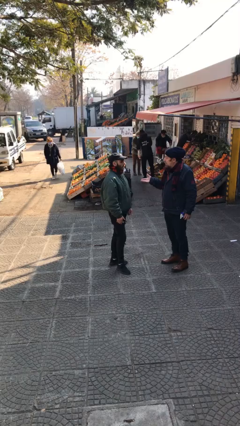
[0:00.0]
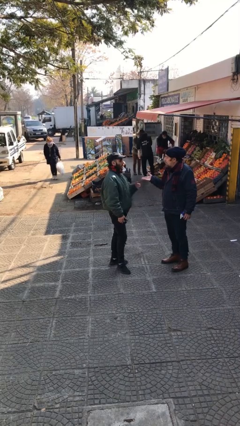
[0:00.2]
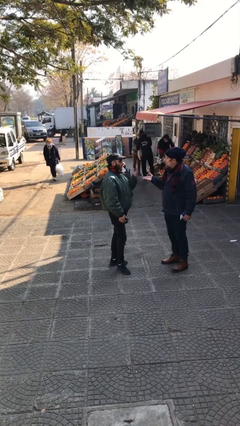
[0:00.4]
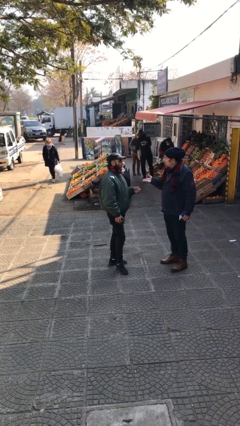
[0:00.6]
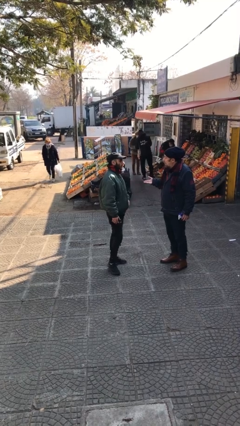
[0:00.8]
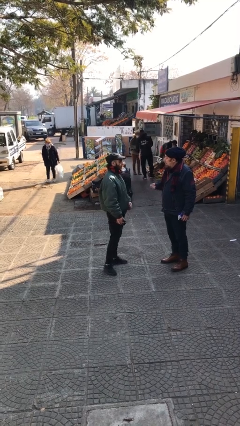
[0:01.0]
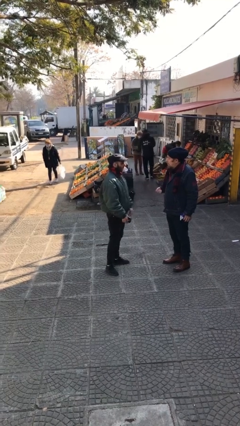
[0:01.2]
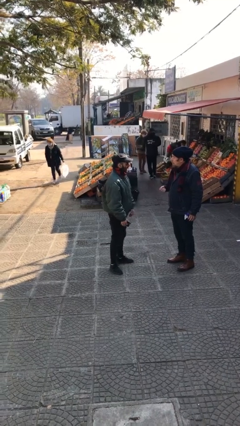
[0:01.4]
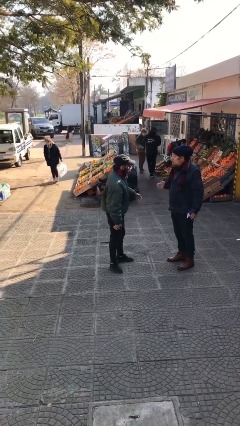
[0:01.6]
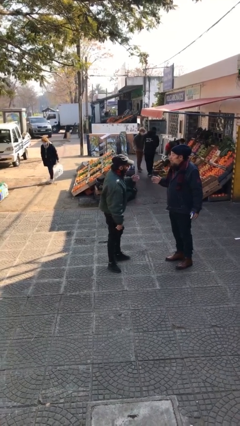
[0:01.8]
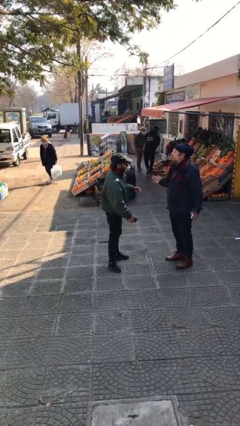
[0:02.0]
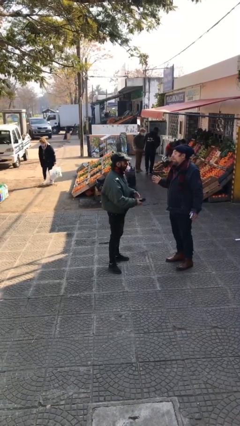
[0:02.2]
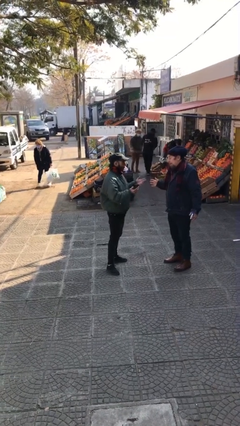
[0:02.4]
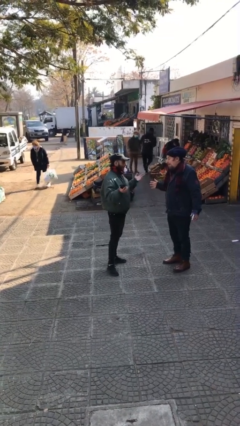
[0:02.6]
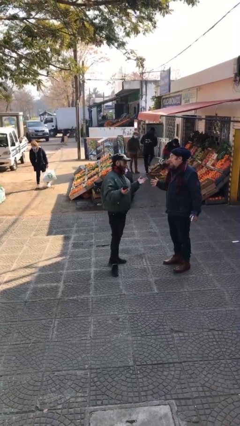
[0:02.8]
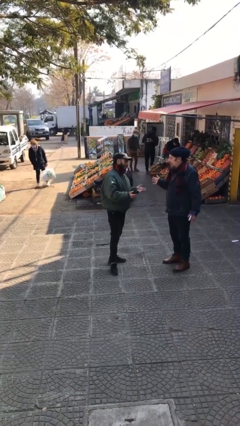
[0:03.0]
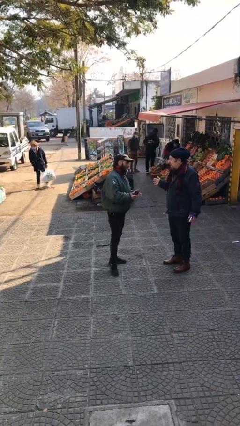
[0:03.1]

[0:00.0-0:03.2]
person talks to person

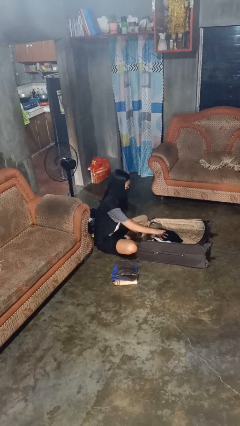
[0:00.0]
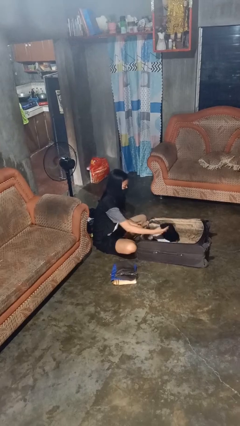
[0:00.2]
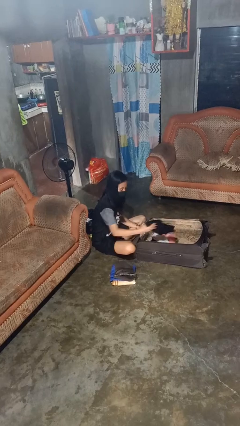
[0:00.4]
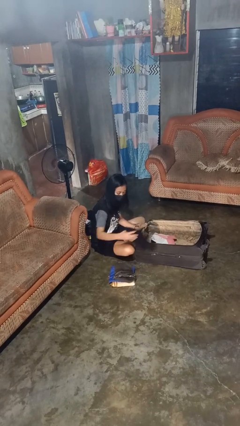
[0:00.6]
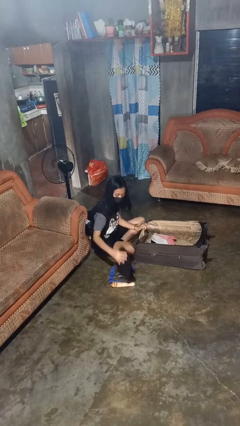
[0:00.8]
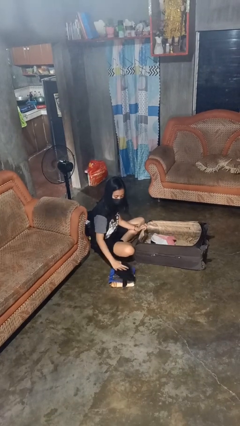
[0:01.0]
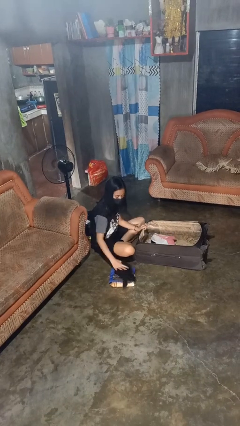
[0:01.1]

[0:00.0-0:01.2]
person unloads clothes from suitcase

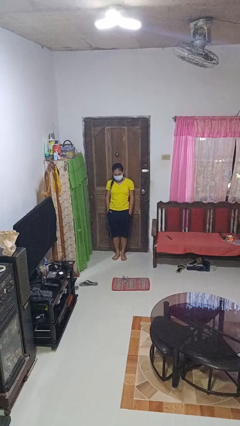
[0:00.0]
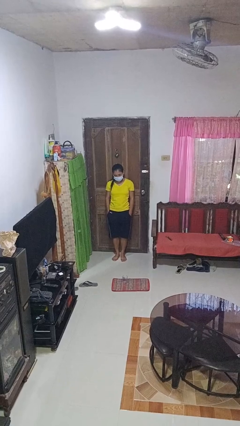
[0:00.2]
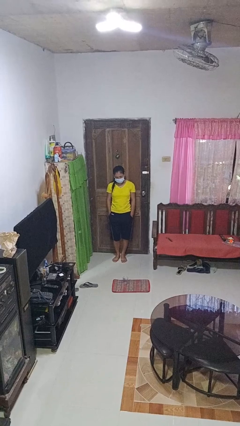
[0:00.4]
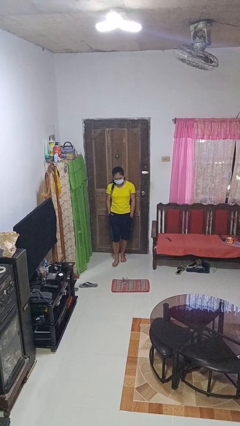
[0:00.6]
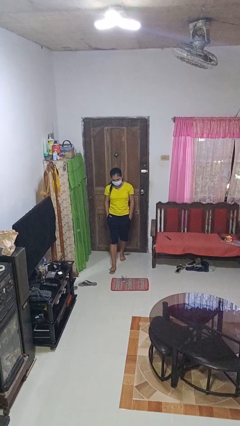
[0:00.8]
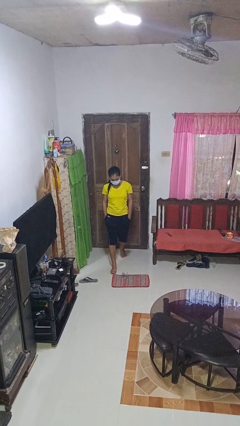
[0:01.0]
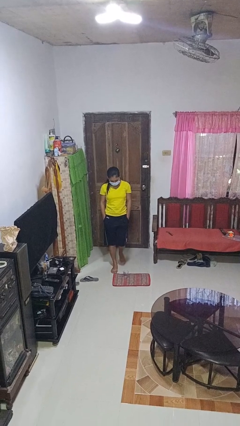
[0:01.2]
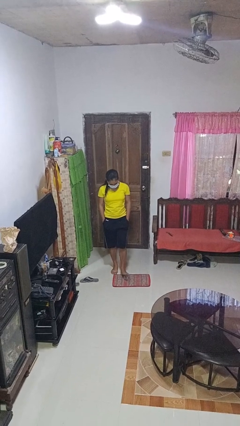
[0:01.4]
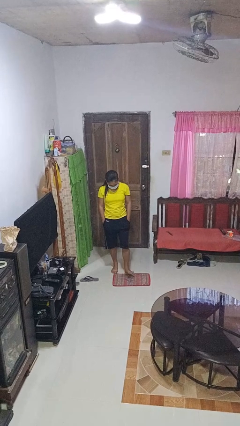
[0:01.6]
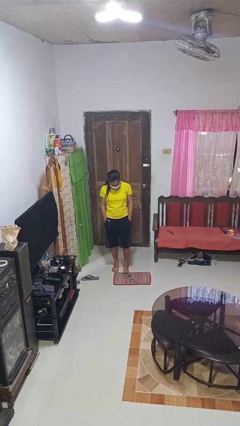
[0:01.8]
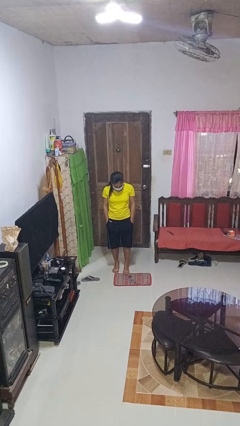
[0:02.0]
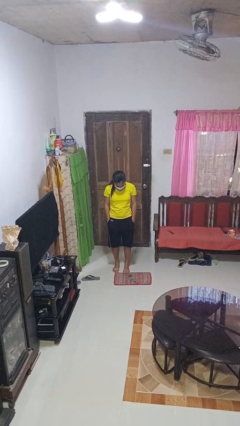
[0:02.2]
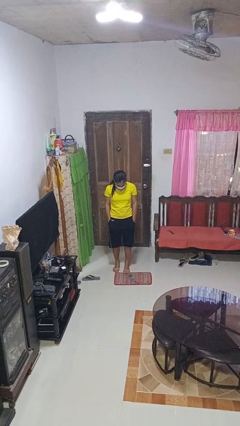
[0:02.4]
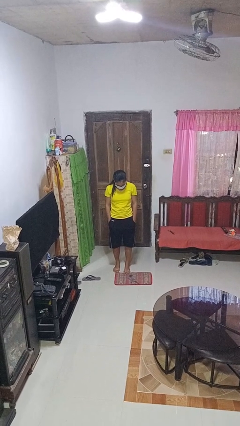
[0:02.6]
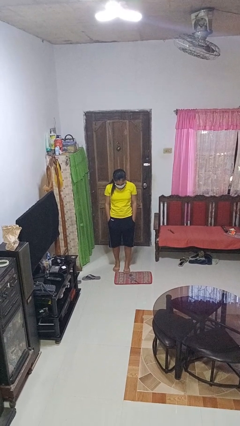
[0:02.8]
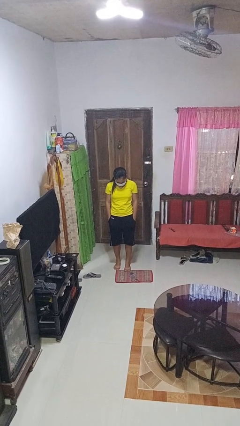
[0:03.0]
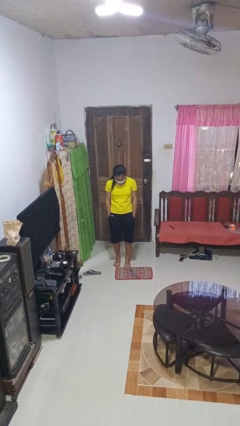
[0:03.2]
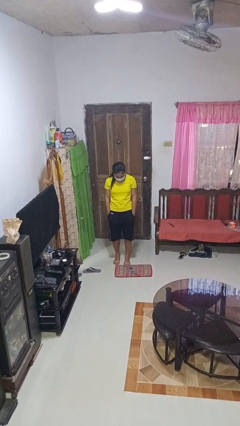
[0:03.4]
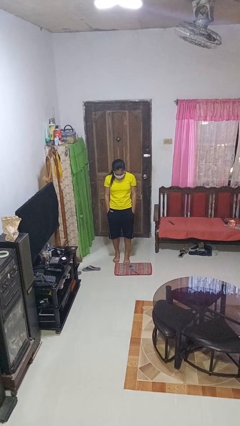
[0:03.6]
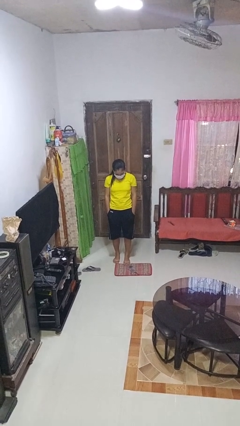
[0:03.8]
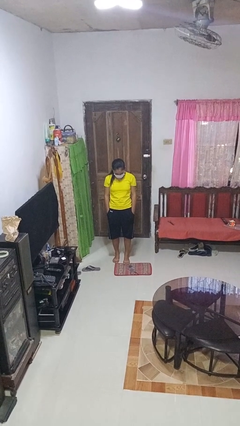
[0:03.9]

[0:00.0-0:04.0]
person spills on floor

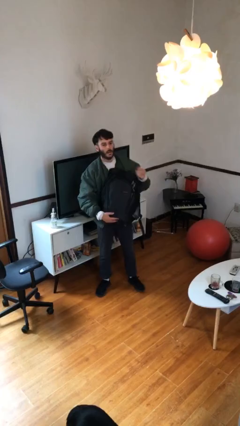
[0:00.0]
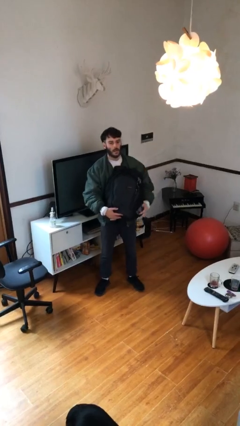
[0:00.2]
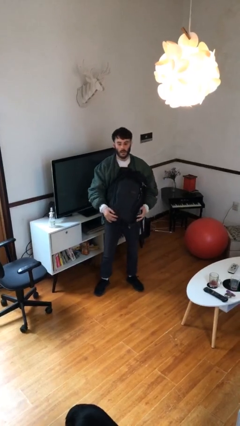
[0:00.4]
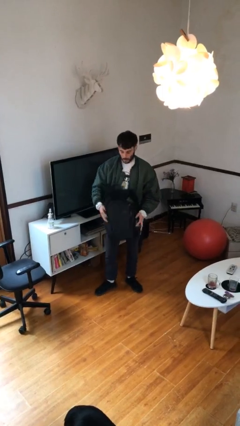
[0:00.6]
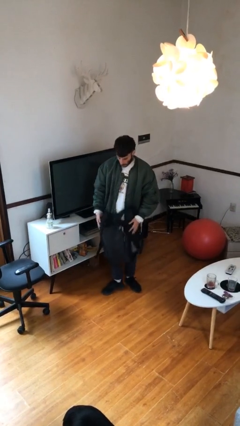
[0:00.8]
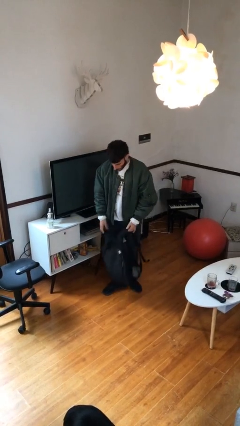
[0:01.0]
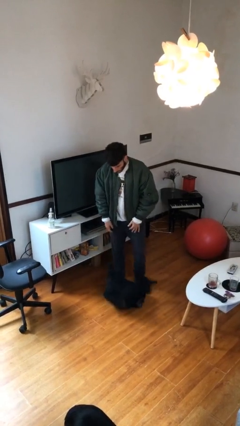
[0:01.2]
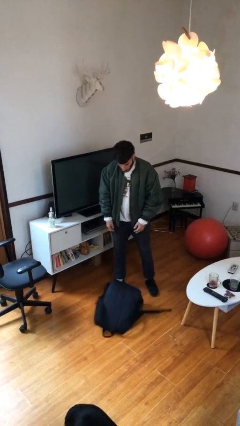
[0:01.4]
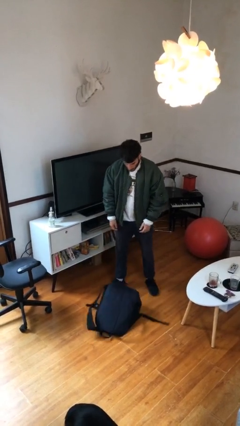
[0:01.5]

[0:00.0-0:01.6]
person drops object

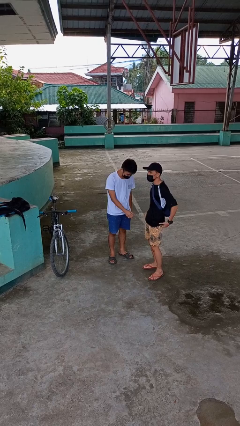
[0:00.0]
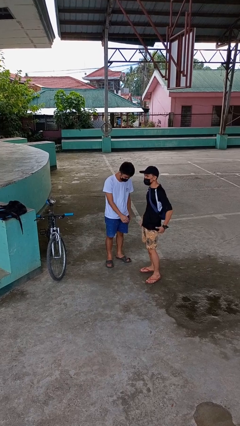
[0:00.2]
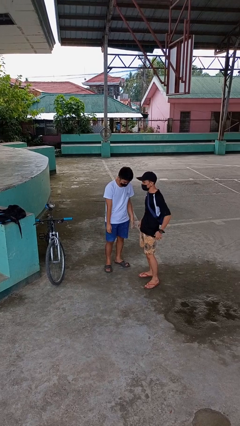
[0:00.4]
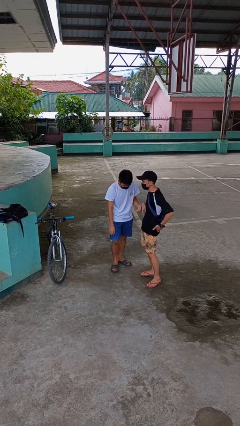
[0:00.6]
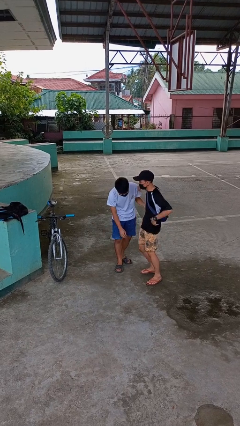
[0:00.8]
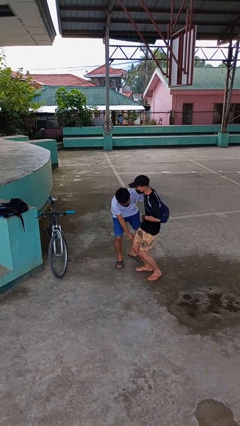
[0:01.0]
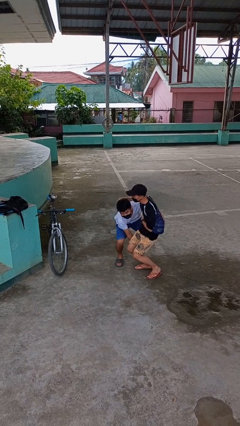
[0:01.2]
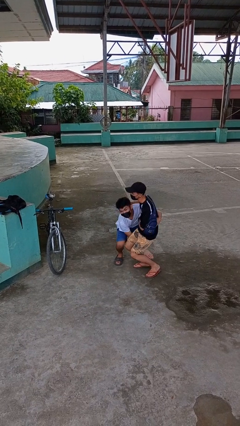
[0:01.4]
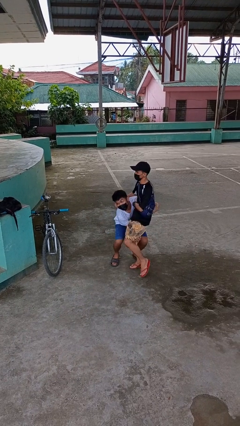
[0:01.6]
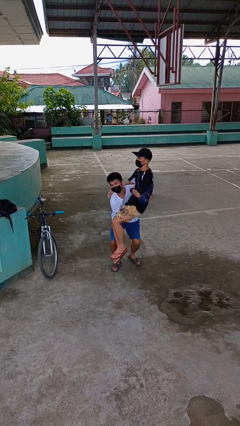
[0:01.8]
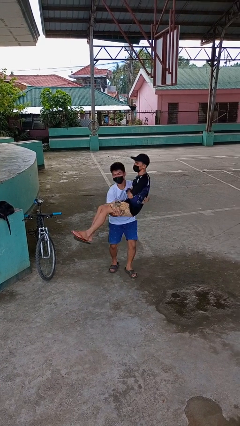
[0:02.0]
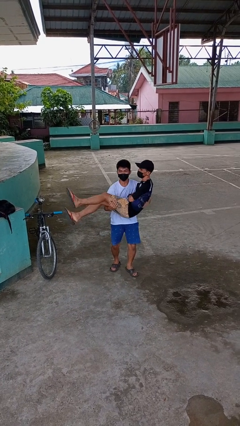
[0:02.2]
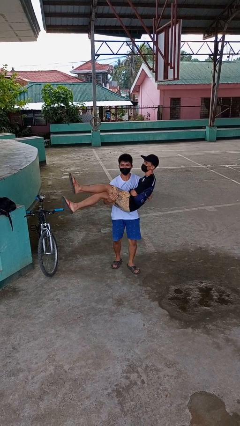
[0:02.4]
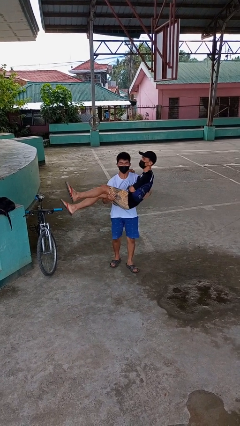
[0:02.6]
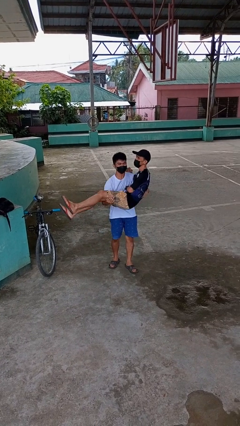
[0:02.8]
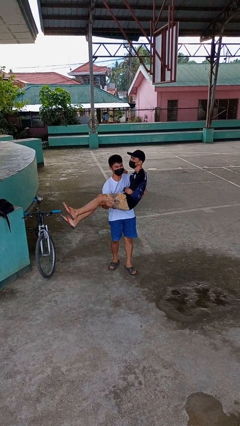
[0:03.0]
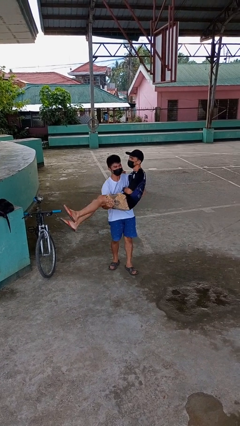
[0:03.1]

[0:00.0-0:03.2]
person picks up person

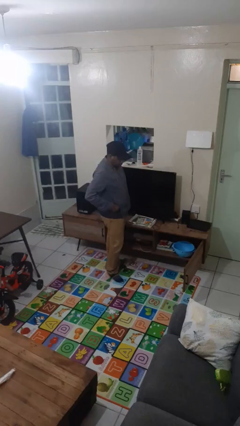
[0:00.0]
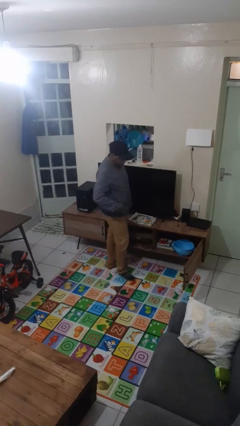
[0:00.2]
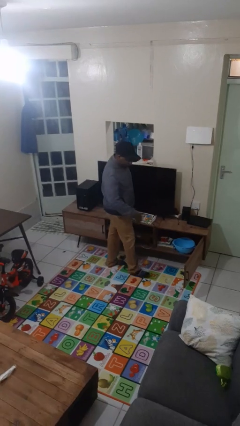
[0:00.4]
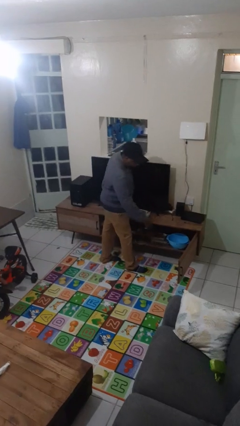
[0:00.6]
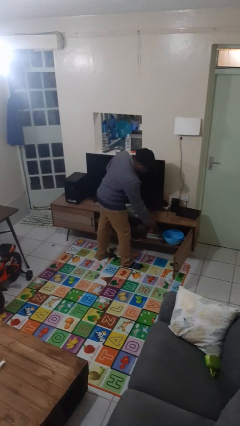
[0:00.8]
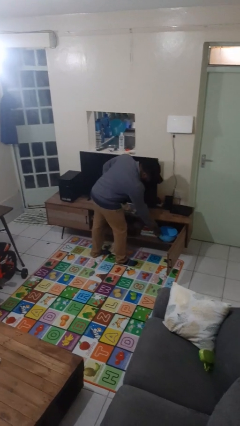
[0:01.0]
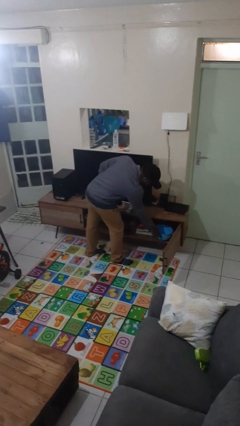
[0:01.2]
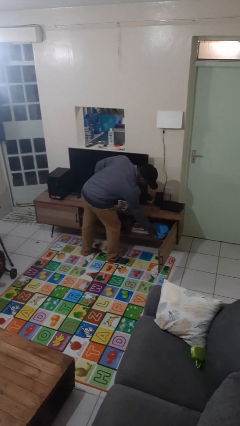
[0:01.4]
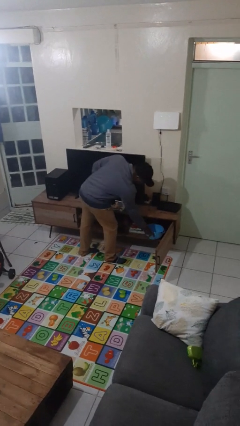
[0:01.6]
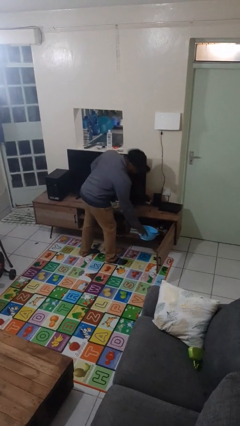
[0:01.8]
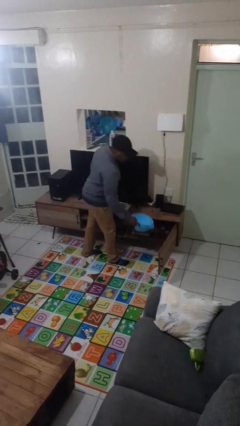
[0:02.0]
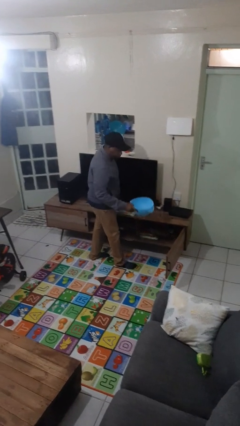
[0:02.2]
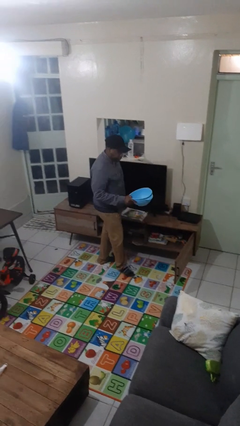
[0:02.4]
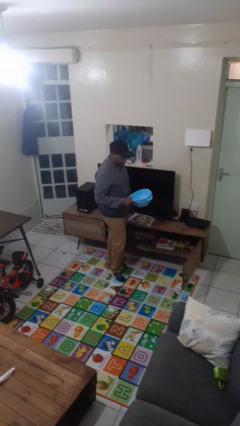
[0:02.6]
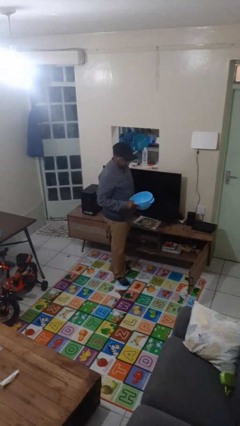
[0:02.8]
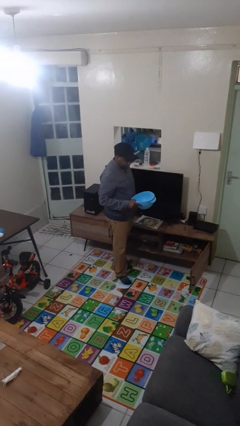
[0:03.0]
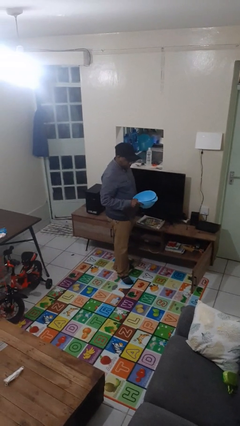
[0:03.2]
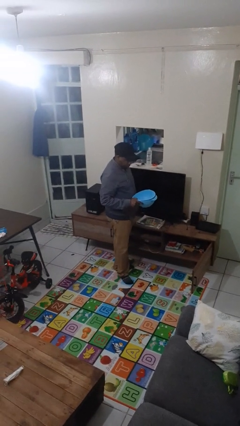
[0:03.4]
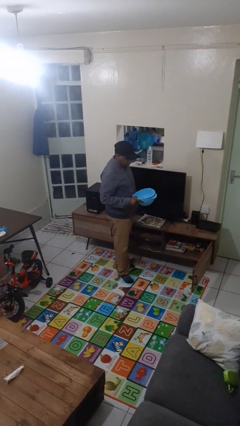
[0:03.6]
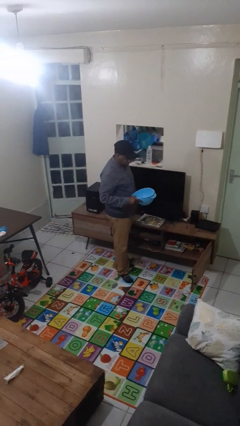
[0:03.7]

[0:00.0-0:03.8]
person picks up object from cabinet

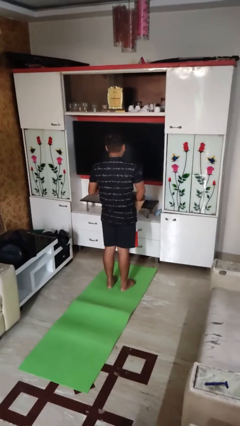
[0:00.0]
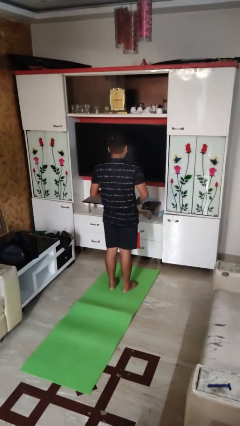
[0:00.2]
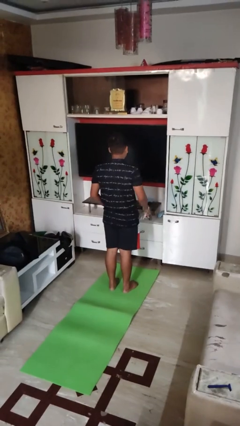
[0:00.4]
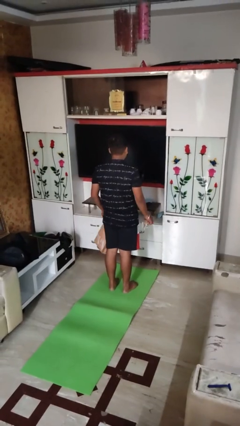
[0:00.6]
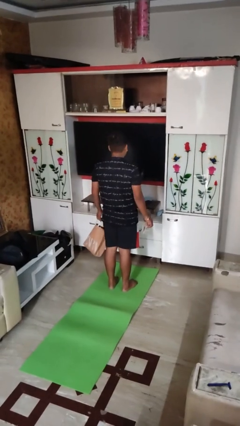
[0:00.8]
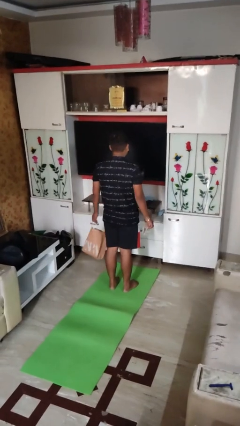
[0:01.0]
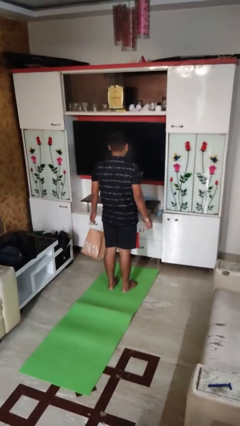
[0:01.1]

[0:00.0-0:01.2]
person takes object from bag
